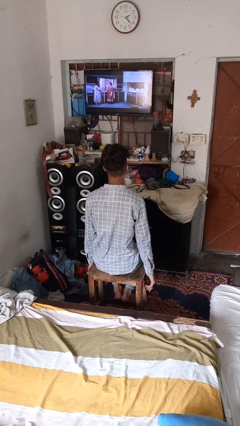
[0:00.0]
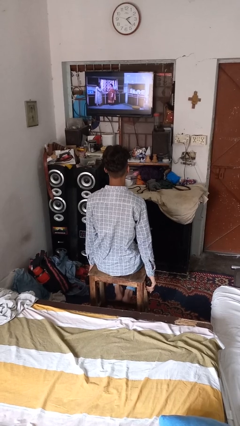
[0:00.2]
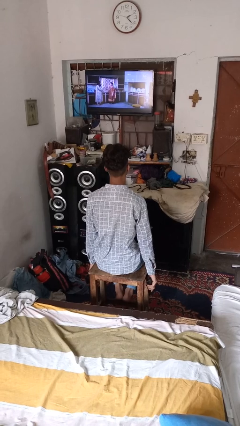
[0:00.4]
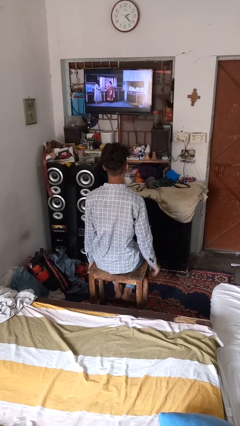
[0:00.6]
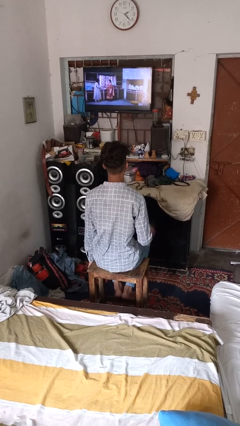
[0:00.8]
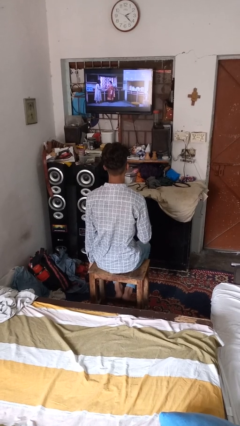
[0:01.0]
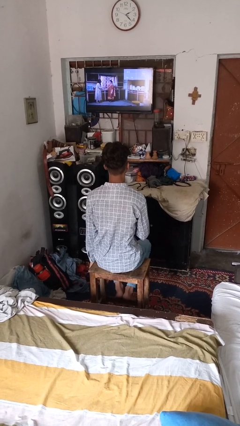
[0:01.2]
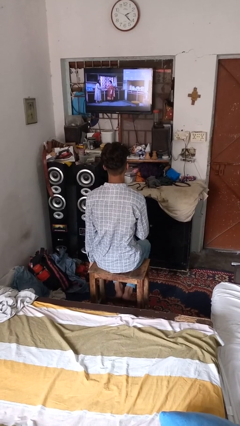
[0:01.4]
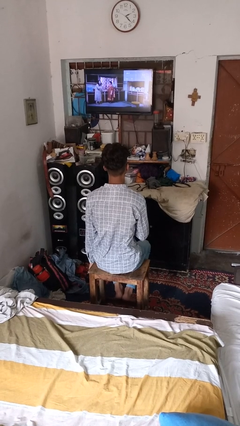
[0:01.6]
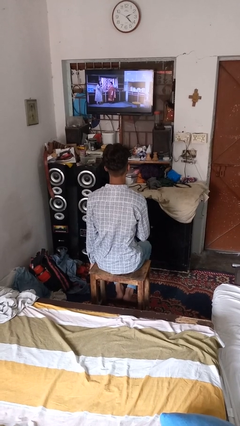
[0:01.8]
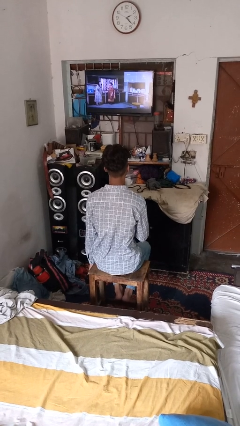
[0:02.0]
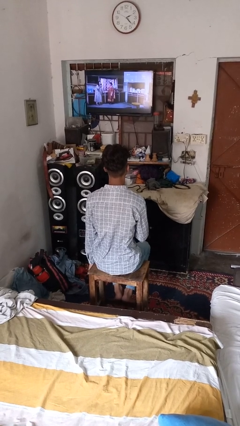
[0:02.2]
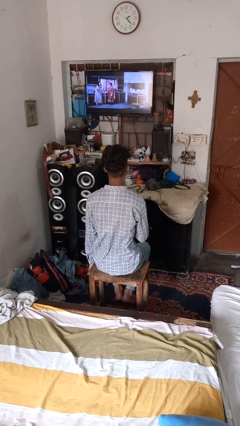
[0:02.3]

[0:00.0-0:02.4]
person uses television remote

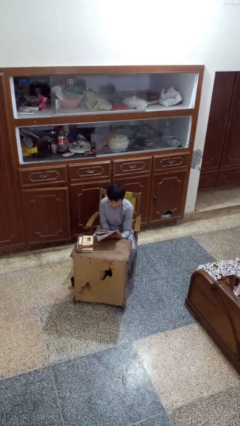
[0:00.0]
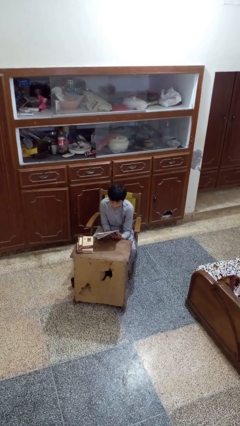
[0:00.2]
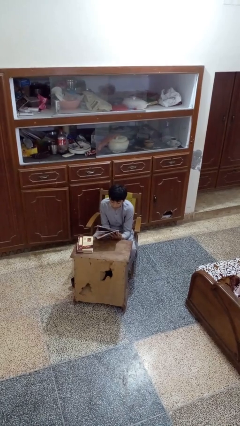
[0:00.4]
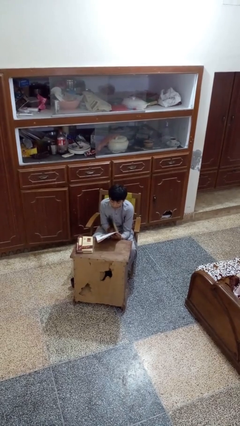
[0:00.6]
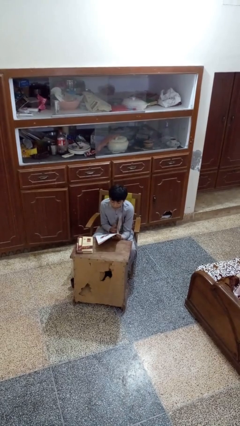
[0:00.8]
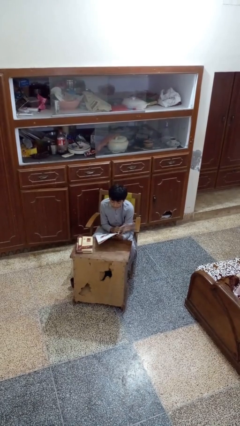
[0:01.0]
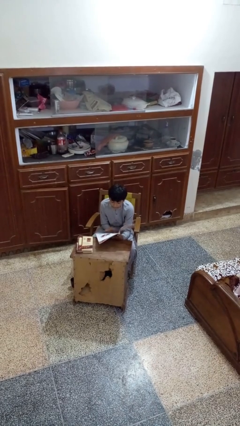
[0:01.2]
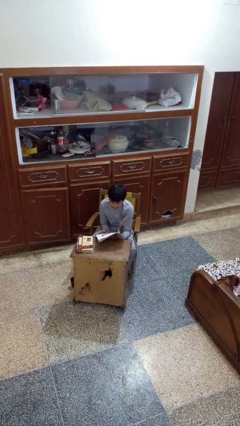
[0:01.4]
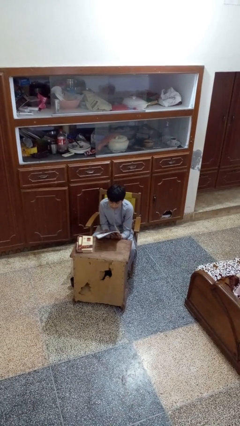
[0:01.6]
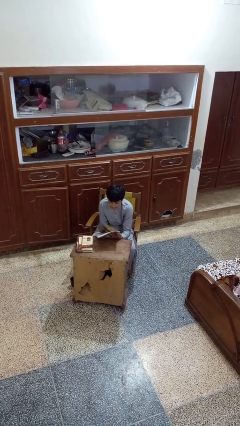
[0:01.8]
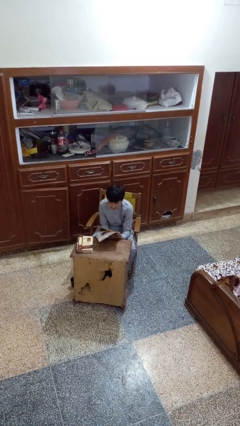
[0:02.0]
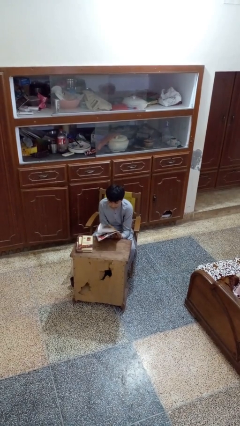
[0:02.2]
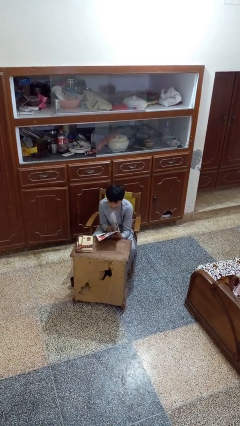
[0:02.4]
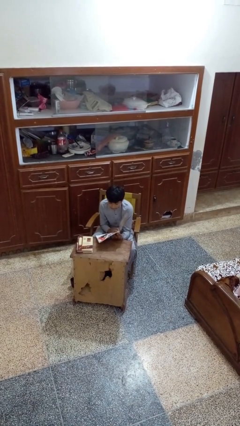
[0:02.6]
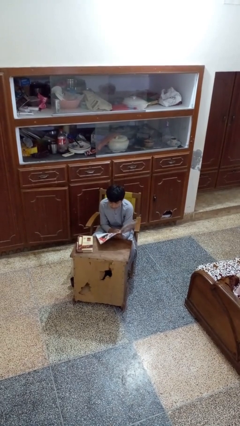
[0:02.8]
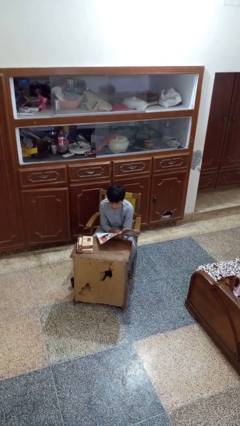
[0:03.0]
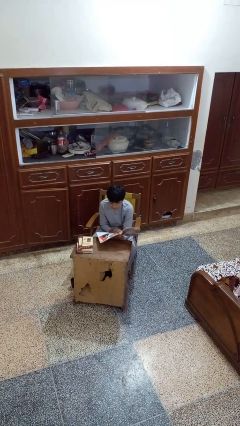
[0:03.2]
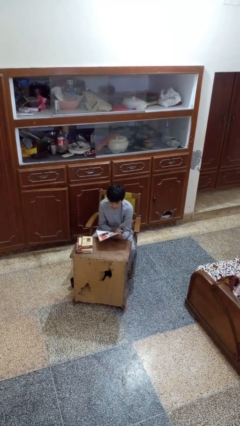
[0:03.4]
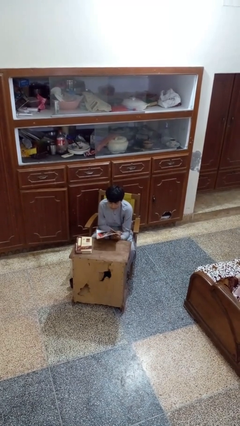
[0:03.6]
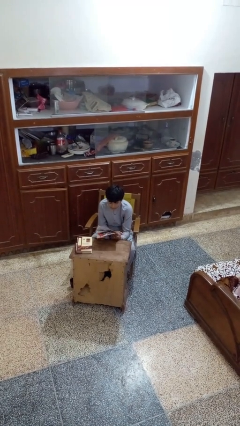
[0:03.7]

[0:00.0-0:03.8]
person reads magazine

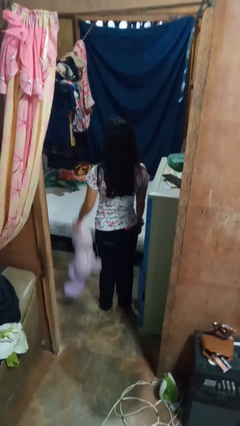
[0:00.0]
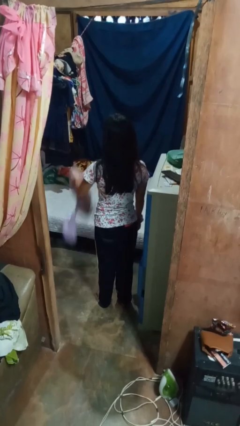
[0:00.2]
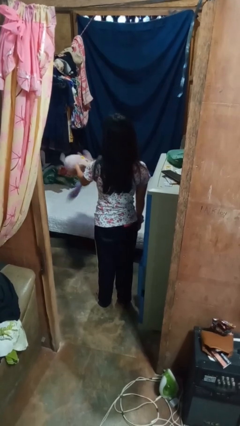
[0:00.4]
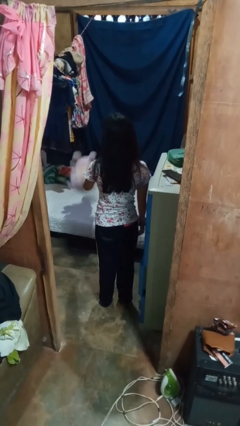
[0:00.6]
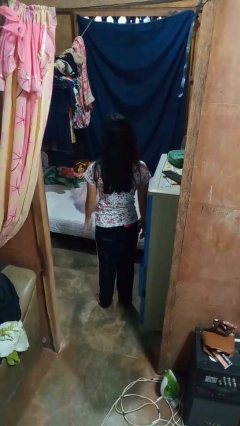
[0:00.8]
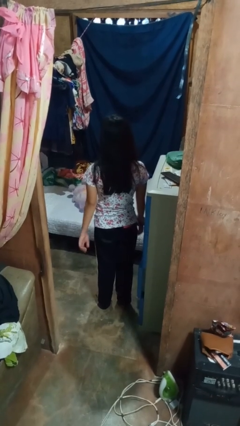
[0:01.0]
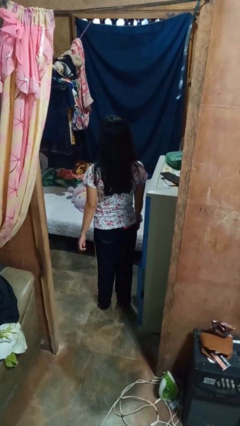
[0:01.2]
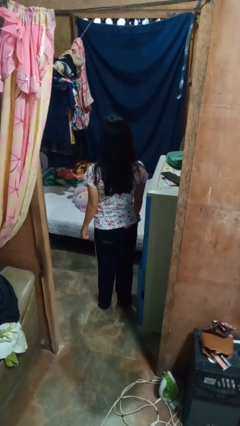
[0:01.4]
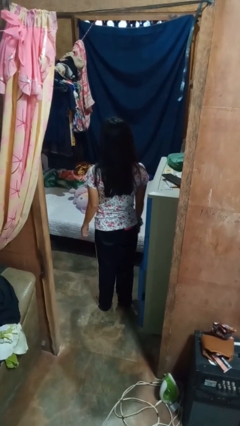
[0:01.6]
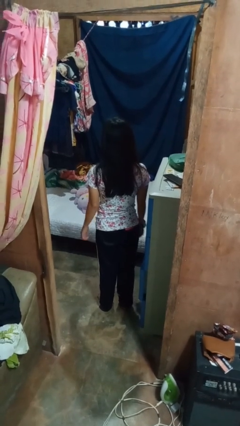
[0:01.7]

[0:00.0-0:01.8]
person throws object on bed

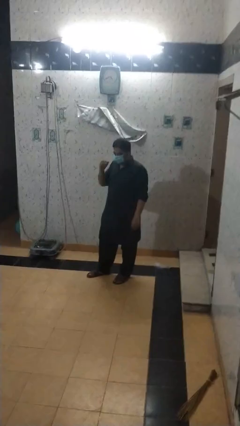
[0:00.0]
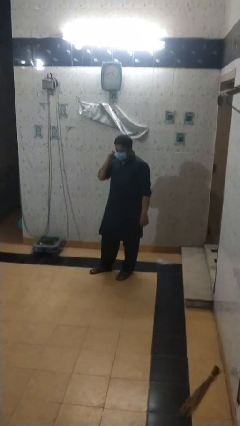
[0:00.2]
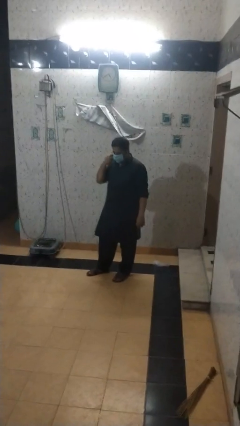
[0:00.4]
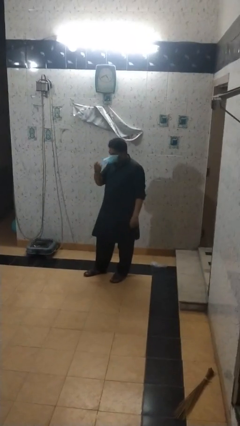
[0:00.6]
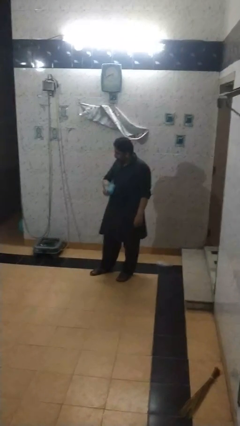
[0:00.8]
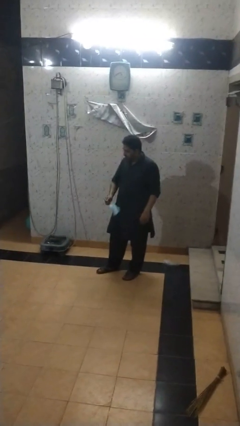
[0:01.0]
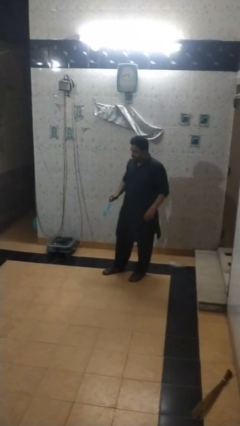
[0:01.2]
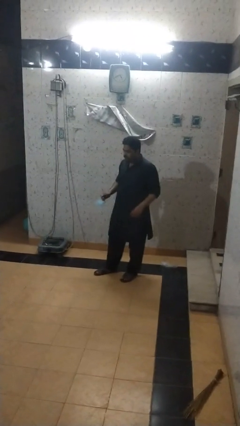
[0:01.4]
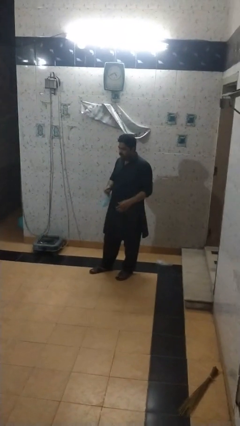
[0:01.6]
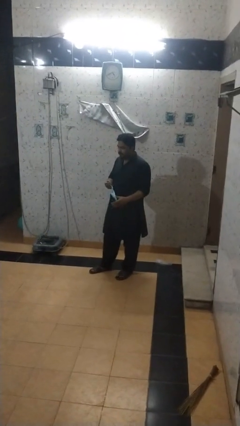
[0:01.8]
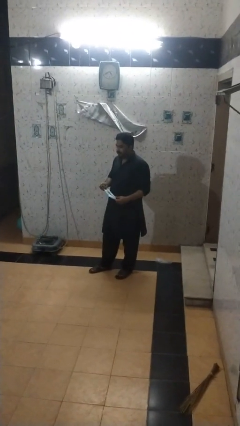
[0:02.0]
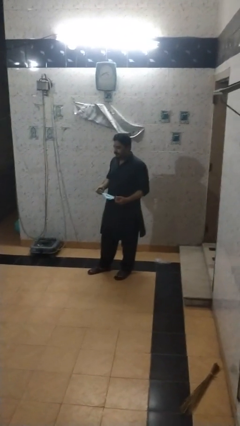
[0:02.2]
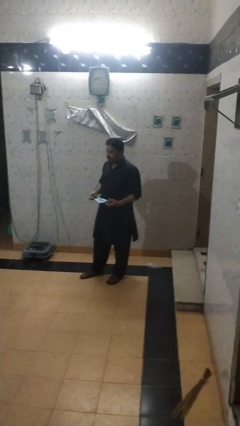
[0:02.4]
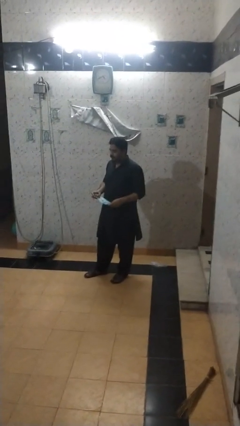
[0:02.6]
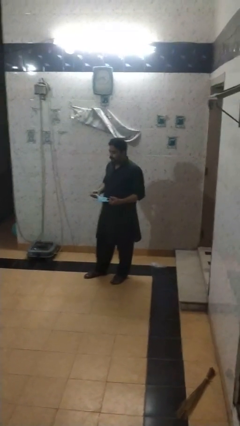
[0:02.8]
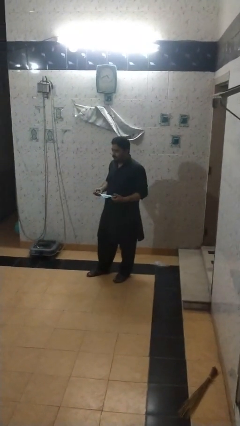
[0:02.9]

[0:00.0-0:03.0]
person takes off facemask

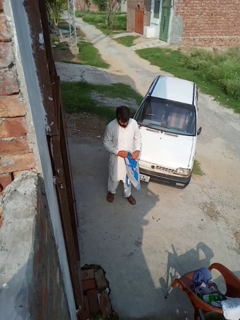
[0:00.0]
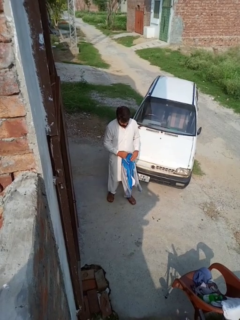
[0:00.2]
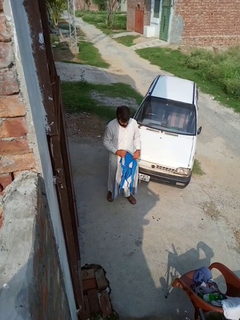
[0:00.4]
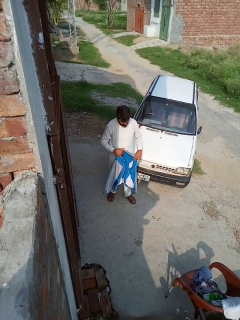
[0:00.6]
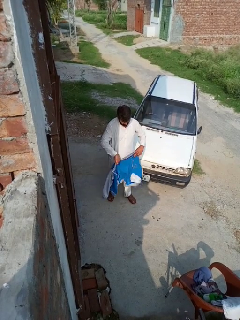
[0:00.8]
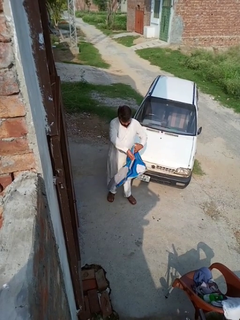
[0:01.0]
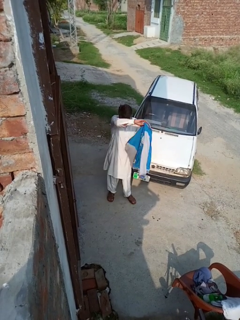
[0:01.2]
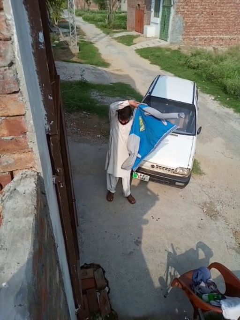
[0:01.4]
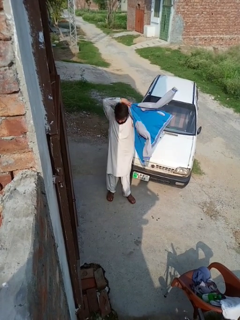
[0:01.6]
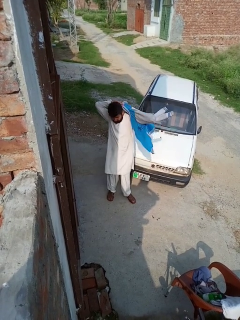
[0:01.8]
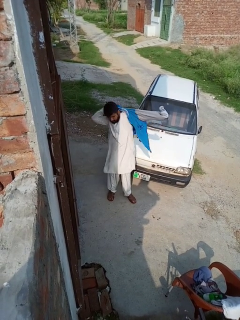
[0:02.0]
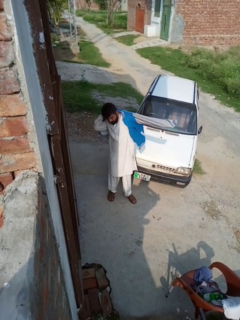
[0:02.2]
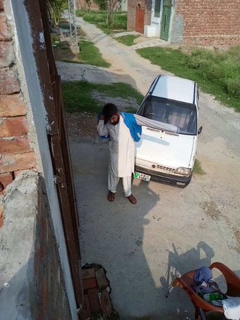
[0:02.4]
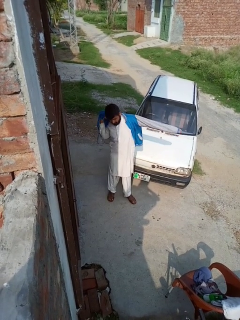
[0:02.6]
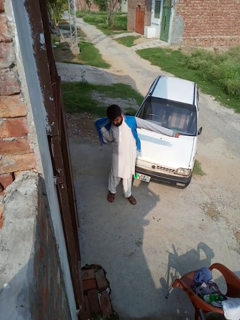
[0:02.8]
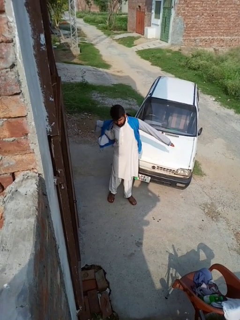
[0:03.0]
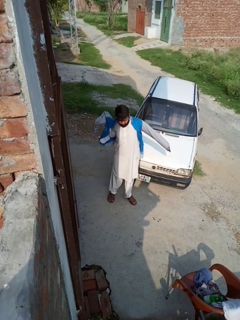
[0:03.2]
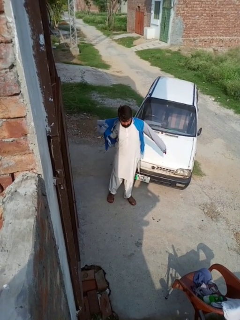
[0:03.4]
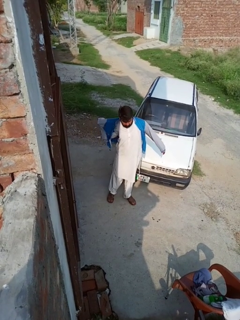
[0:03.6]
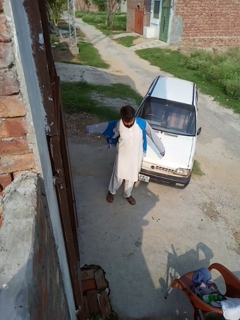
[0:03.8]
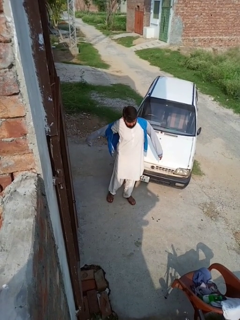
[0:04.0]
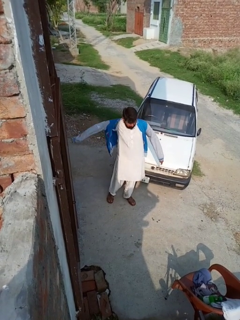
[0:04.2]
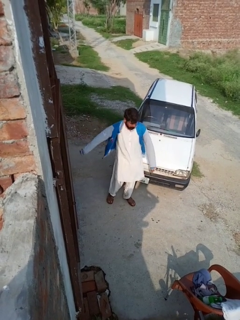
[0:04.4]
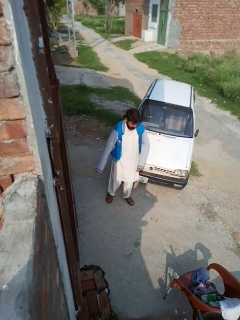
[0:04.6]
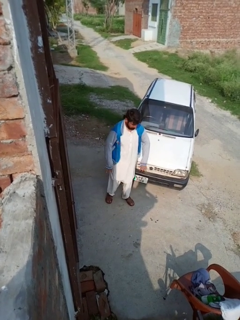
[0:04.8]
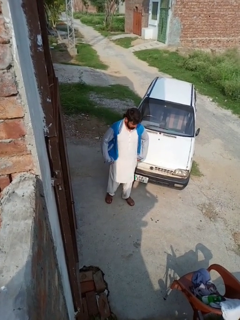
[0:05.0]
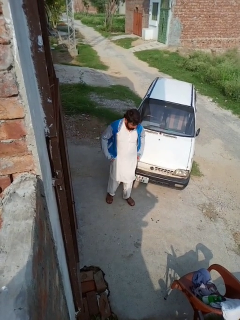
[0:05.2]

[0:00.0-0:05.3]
person puts on jacket

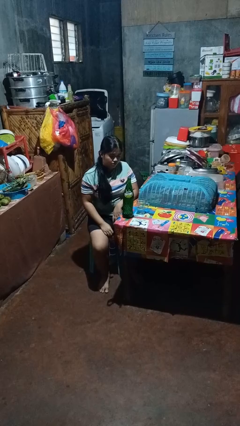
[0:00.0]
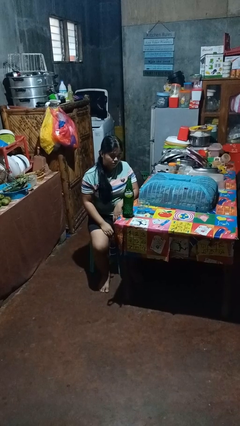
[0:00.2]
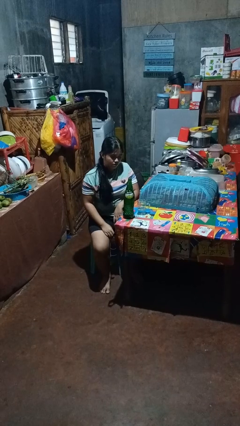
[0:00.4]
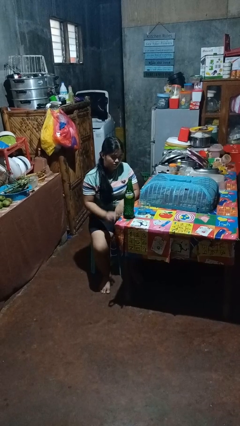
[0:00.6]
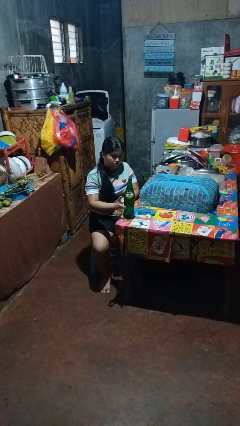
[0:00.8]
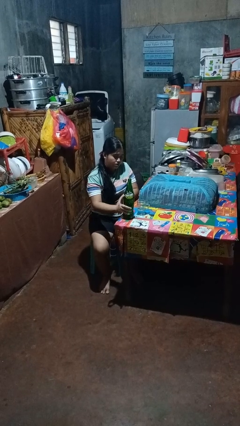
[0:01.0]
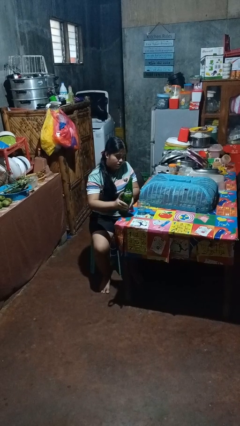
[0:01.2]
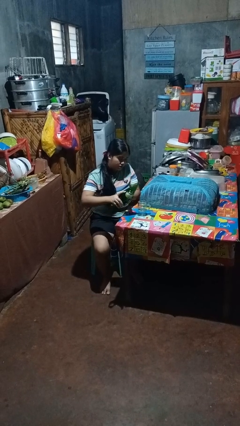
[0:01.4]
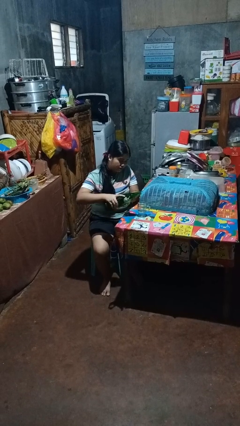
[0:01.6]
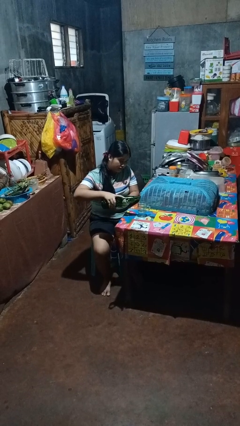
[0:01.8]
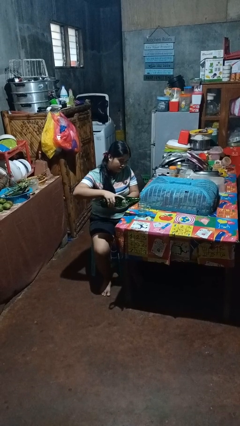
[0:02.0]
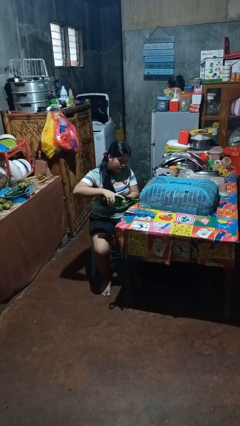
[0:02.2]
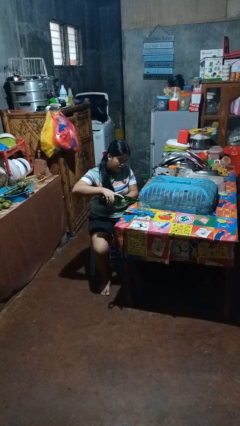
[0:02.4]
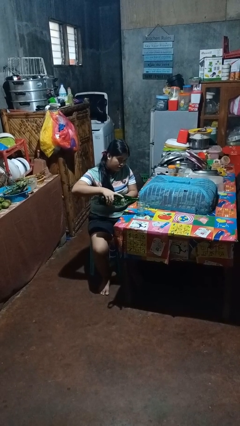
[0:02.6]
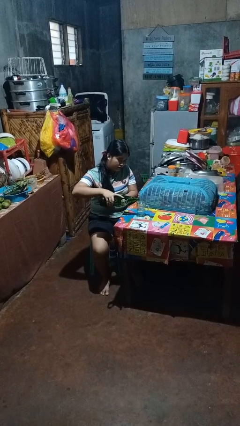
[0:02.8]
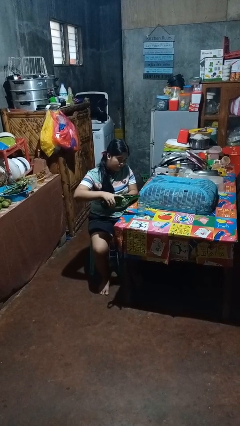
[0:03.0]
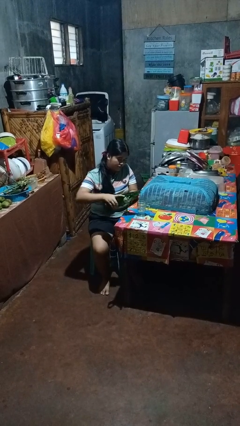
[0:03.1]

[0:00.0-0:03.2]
person pours liquid into cup
